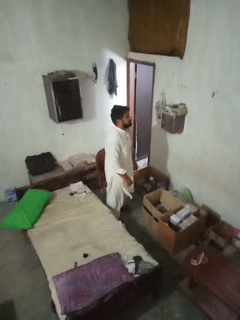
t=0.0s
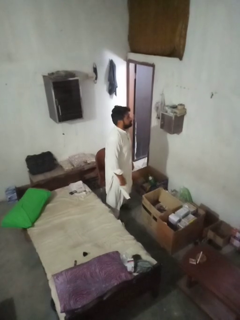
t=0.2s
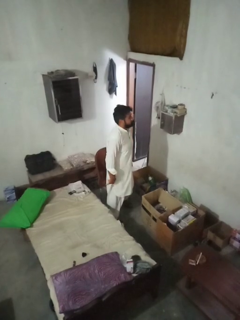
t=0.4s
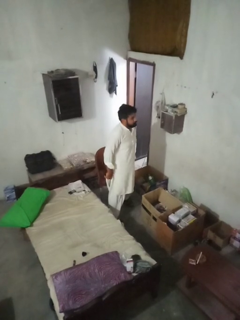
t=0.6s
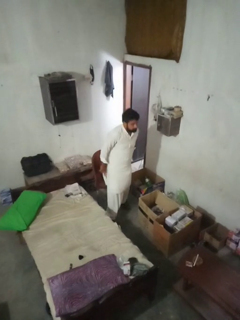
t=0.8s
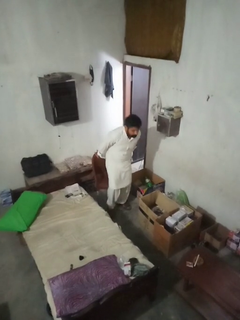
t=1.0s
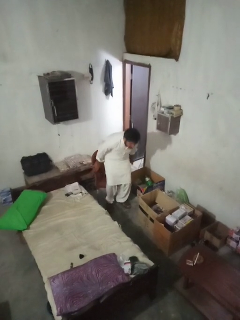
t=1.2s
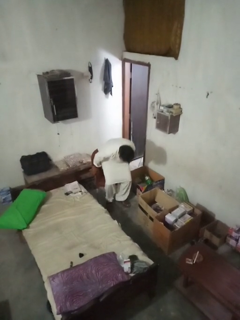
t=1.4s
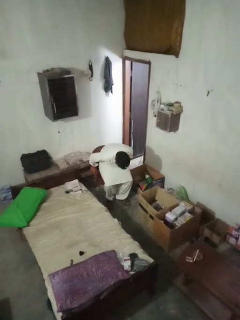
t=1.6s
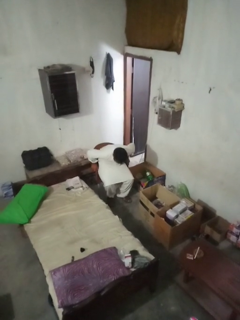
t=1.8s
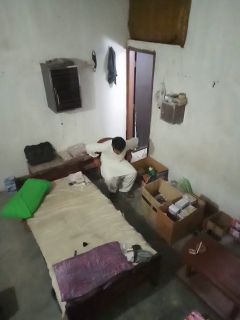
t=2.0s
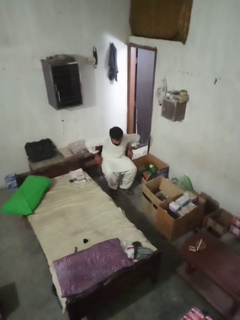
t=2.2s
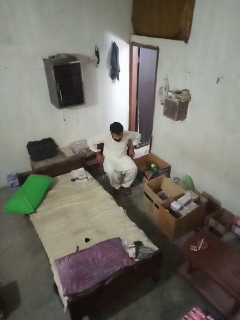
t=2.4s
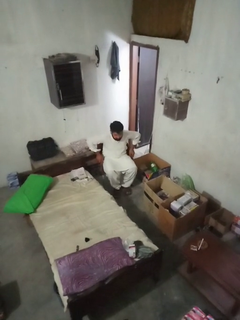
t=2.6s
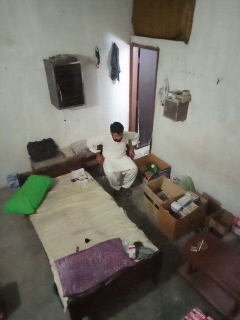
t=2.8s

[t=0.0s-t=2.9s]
person sits down

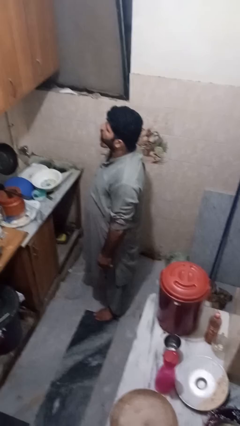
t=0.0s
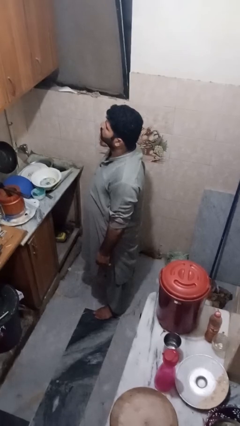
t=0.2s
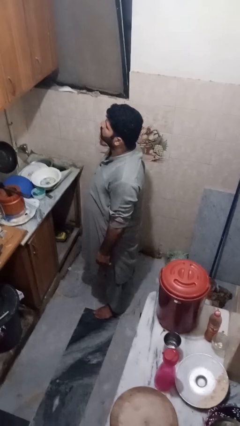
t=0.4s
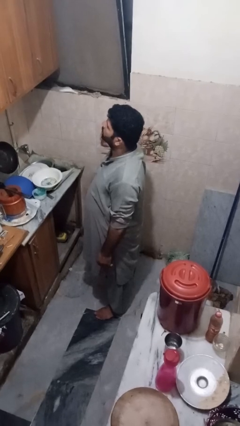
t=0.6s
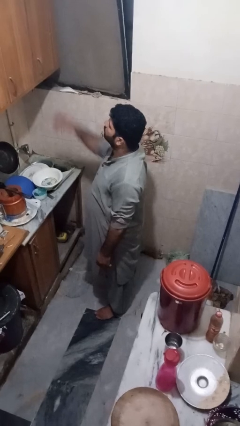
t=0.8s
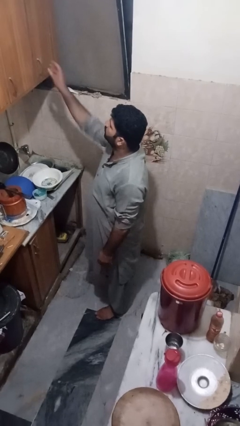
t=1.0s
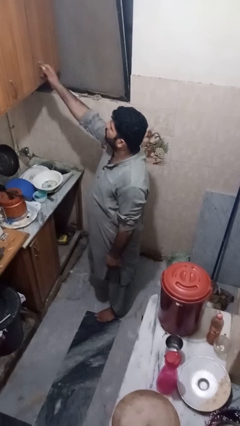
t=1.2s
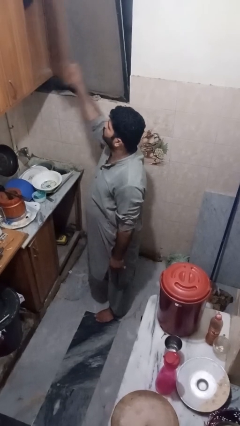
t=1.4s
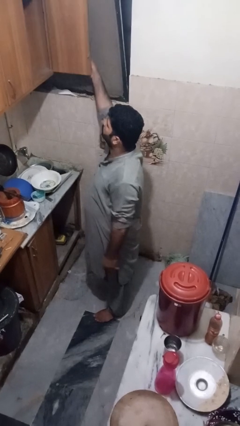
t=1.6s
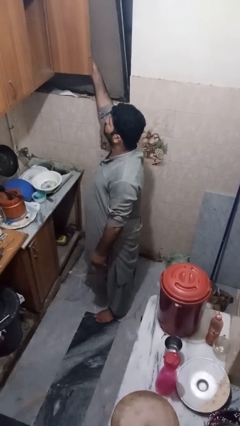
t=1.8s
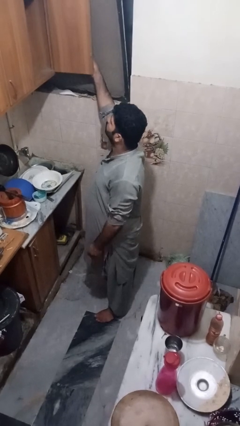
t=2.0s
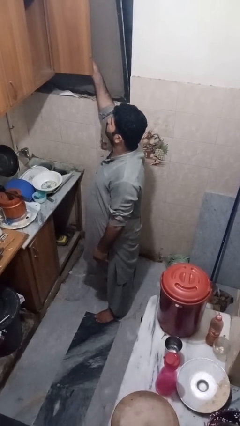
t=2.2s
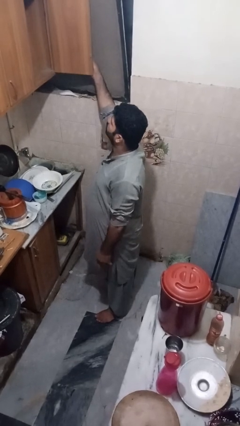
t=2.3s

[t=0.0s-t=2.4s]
person opens cabinet

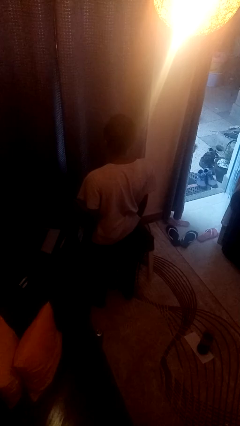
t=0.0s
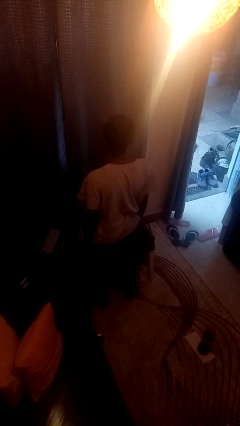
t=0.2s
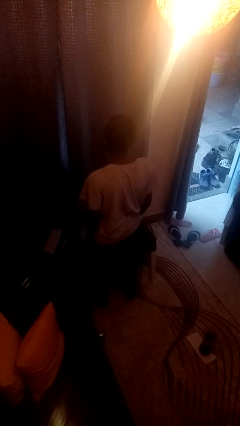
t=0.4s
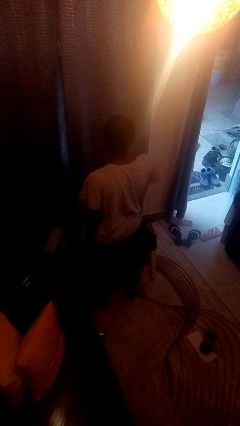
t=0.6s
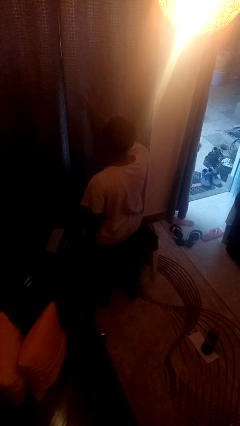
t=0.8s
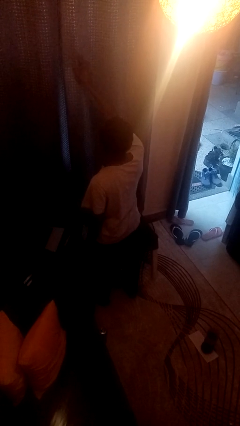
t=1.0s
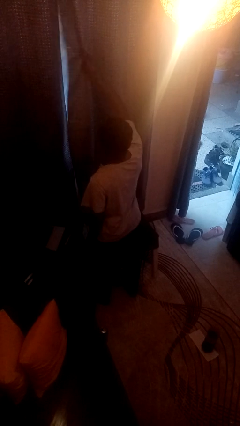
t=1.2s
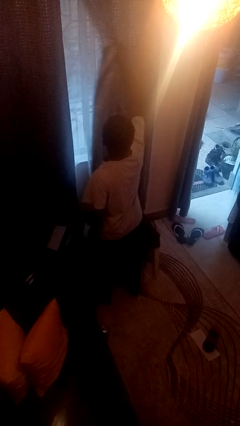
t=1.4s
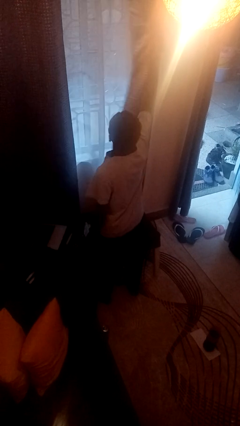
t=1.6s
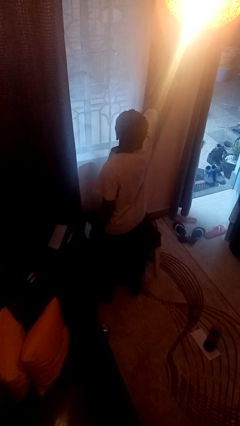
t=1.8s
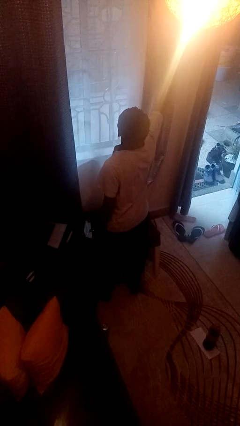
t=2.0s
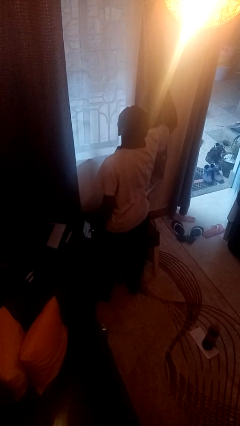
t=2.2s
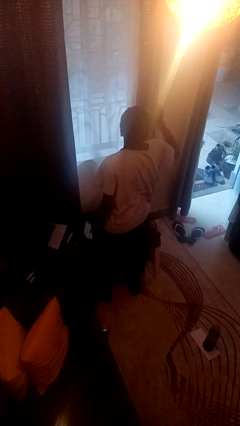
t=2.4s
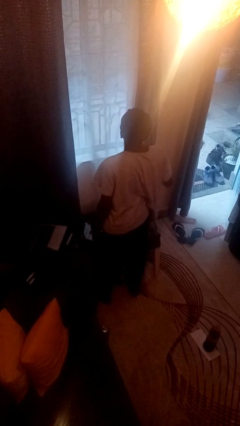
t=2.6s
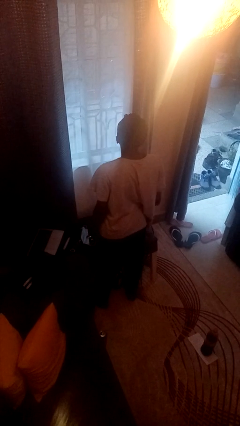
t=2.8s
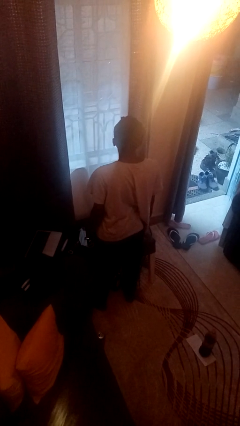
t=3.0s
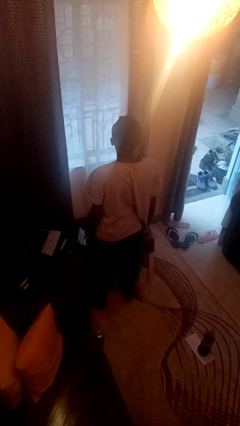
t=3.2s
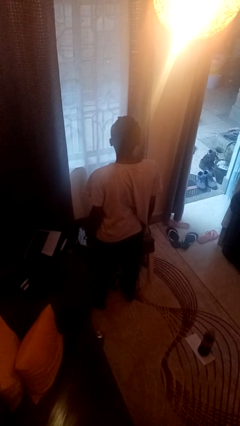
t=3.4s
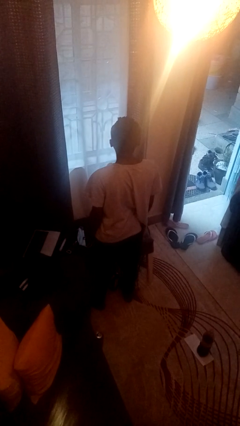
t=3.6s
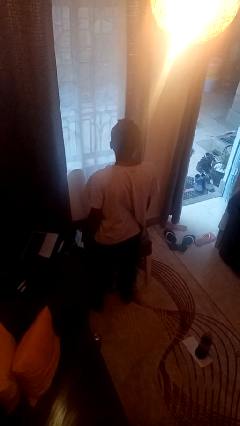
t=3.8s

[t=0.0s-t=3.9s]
person opens curtains

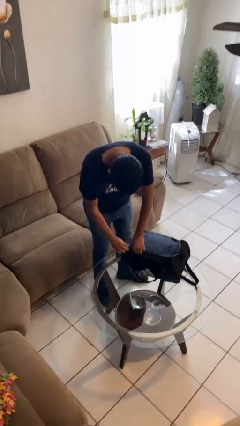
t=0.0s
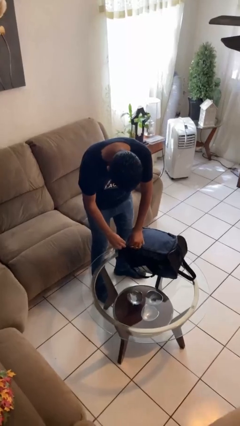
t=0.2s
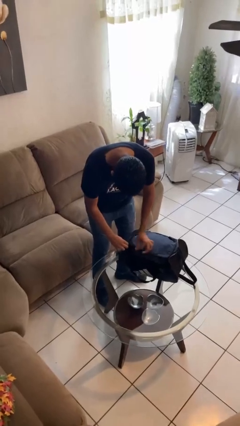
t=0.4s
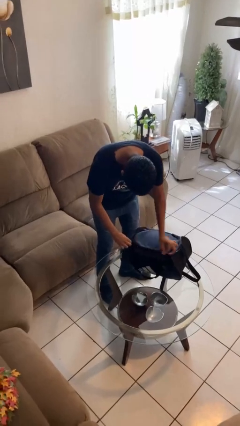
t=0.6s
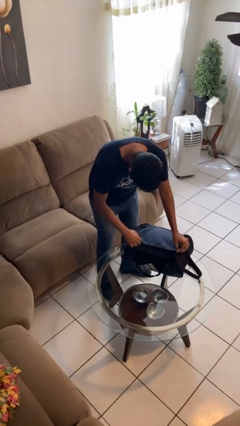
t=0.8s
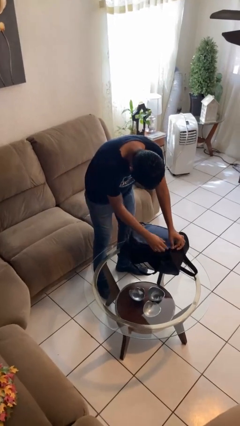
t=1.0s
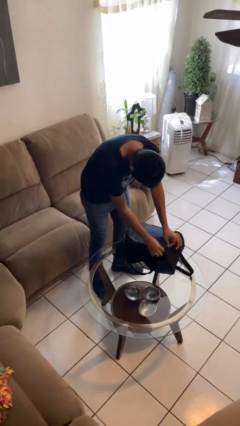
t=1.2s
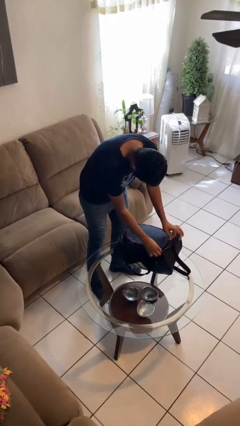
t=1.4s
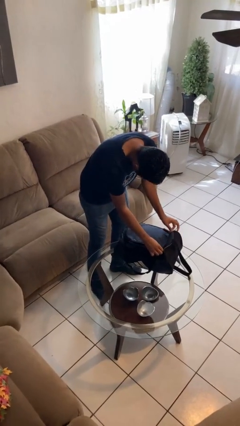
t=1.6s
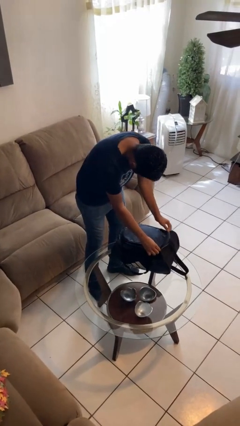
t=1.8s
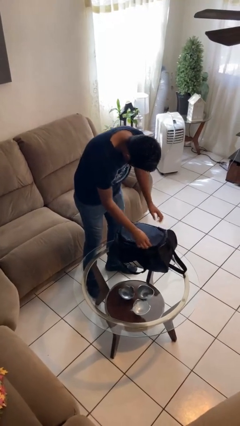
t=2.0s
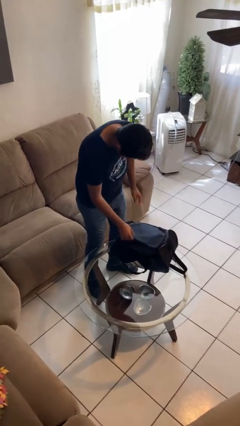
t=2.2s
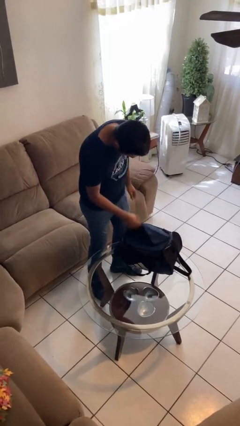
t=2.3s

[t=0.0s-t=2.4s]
person opens suitcase

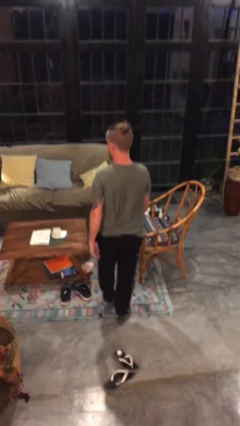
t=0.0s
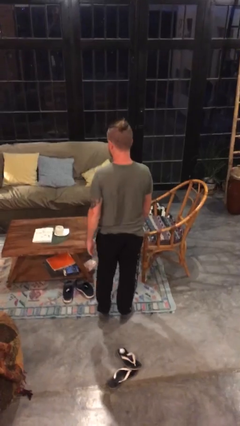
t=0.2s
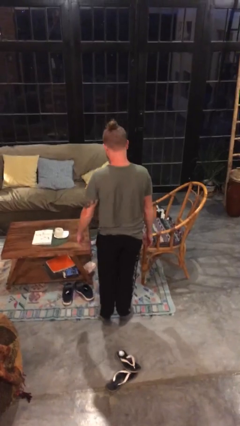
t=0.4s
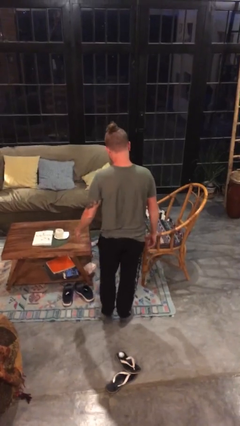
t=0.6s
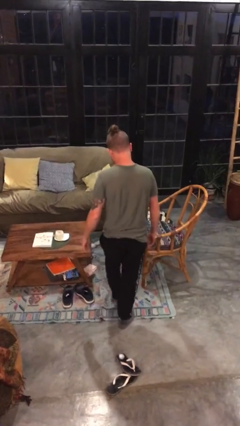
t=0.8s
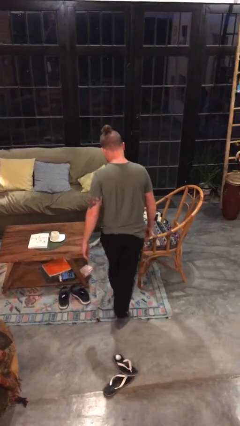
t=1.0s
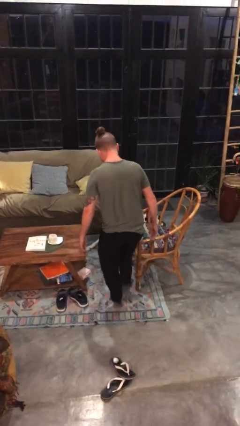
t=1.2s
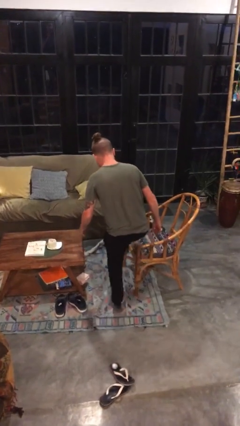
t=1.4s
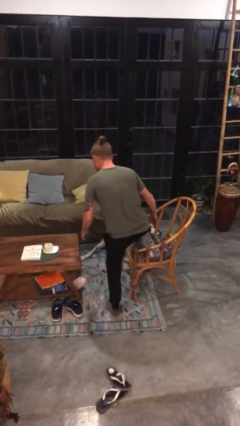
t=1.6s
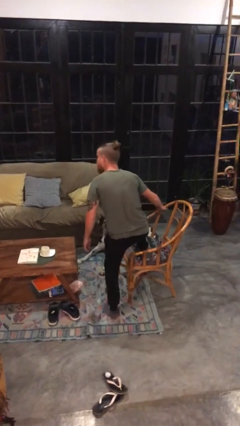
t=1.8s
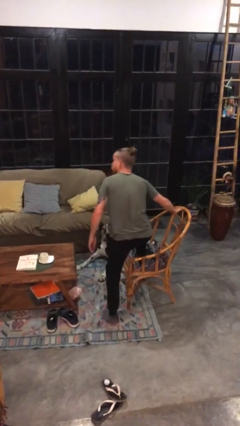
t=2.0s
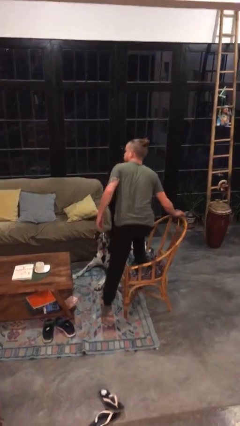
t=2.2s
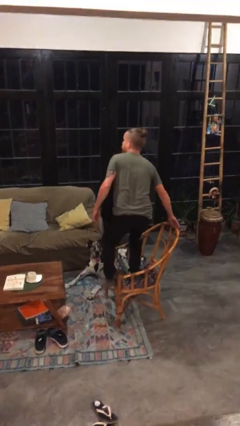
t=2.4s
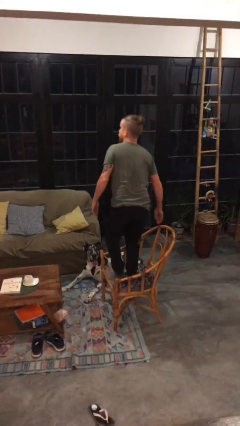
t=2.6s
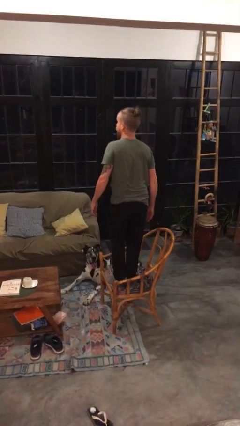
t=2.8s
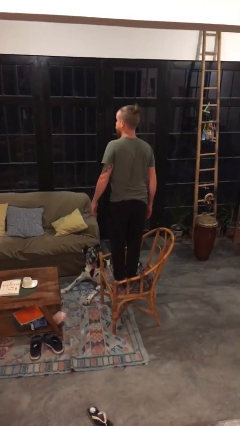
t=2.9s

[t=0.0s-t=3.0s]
person climbs on chair

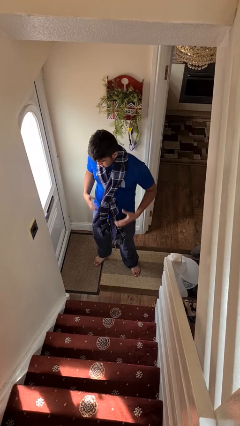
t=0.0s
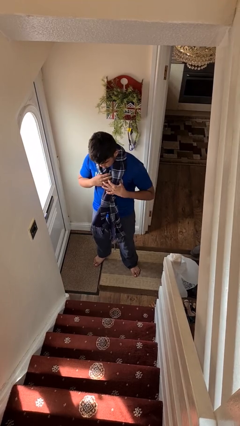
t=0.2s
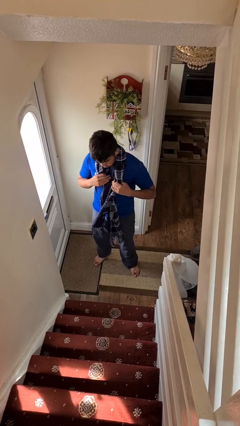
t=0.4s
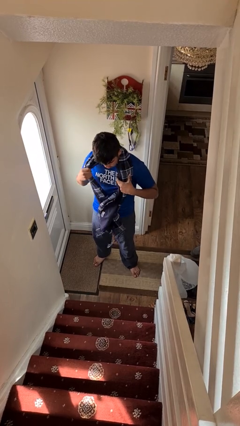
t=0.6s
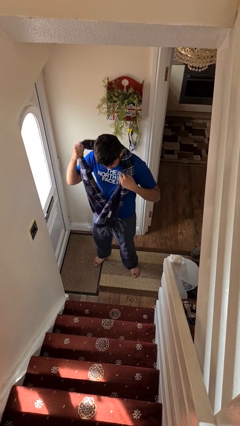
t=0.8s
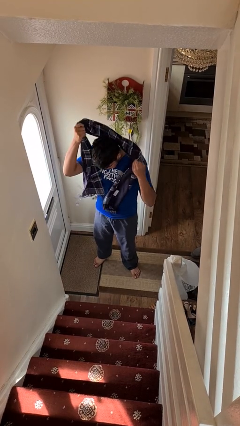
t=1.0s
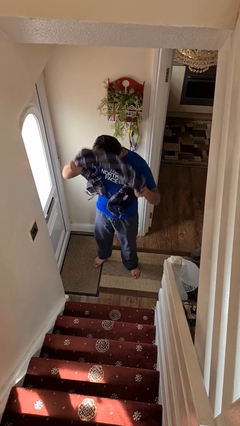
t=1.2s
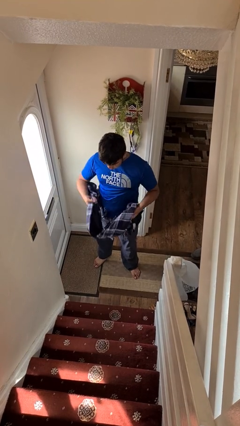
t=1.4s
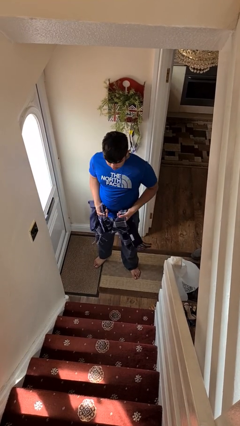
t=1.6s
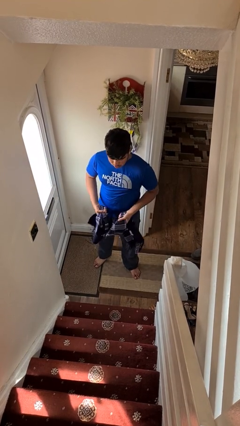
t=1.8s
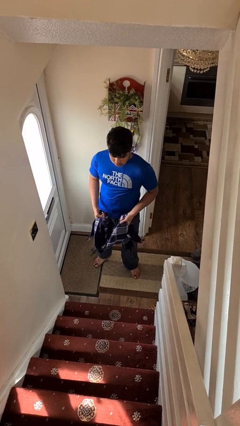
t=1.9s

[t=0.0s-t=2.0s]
person takes off scarf

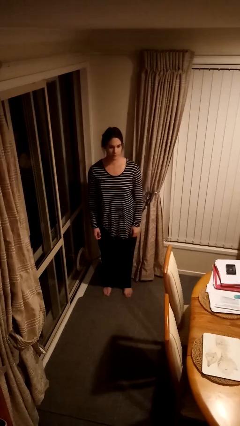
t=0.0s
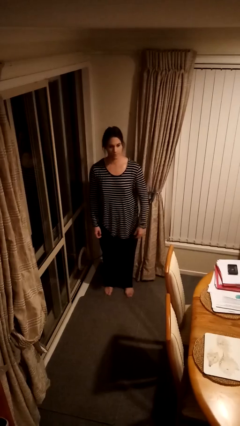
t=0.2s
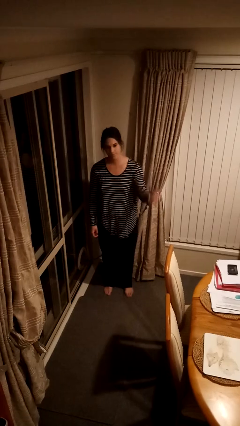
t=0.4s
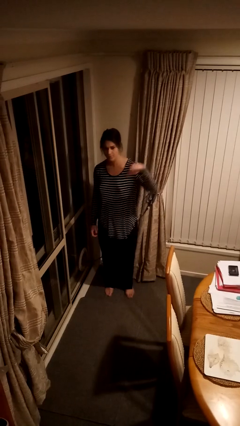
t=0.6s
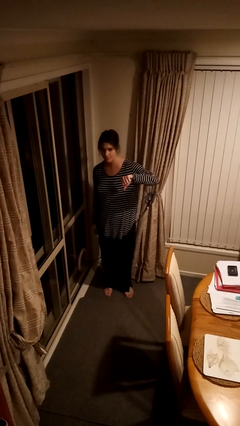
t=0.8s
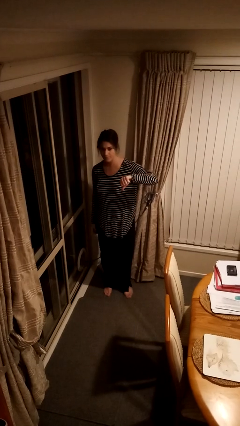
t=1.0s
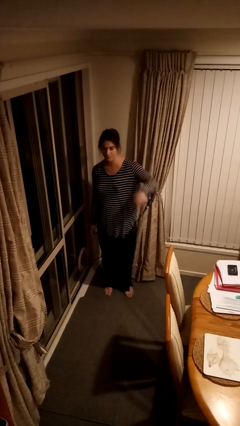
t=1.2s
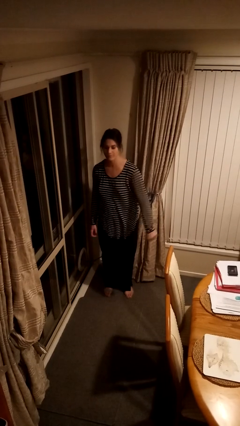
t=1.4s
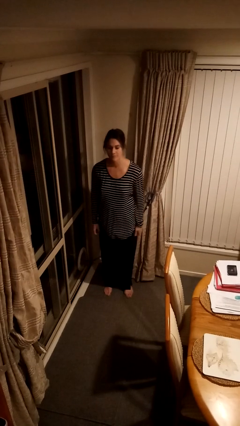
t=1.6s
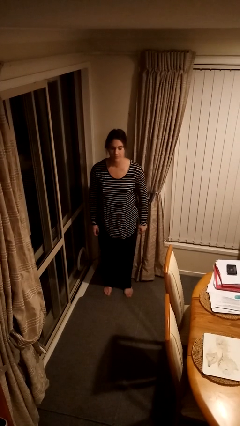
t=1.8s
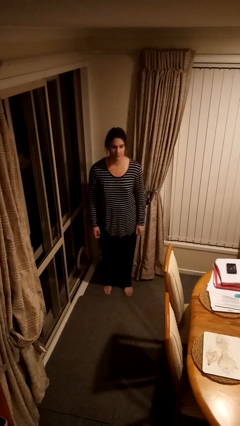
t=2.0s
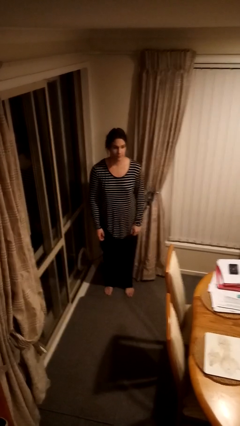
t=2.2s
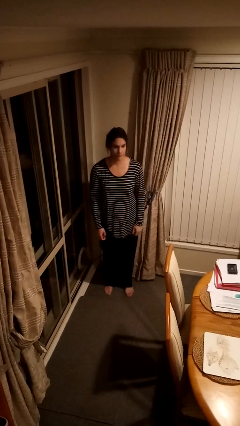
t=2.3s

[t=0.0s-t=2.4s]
person gestures thumbs down
